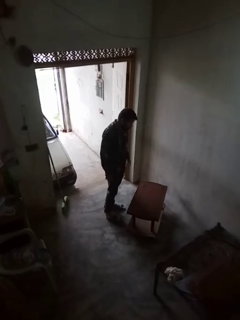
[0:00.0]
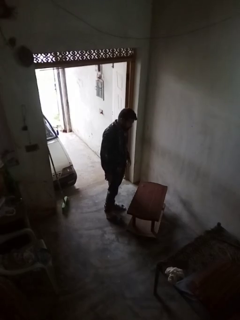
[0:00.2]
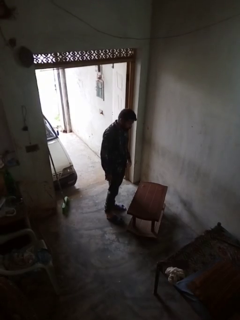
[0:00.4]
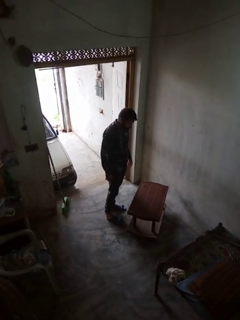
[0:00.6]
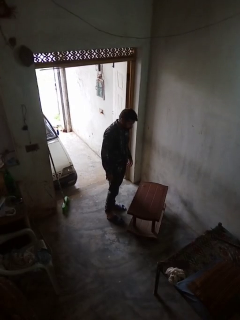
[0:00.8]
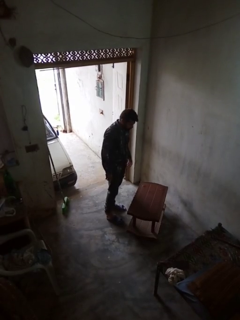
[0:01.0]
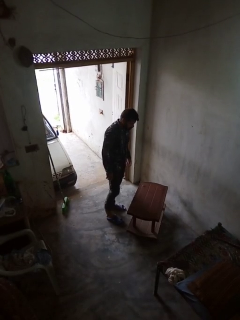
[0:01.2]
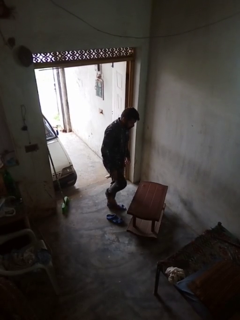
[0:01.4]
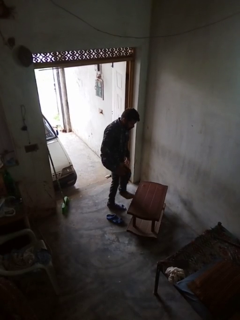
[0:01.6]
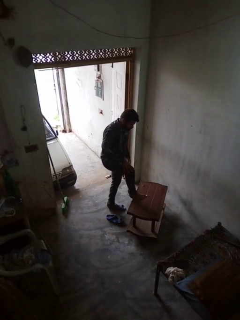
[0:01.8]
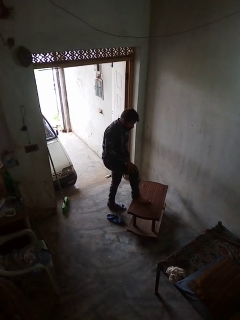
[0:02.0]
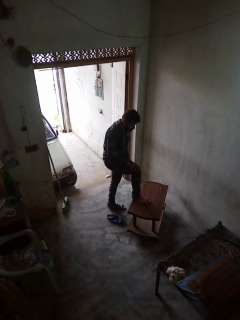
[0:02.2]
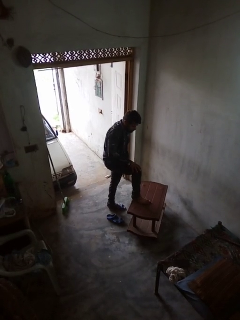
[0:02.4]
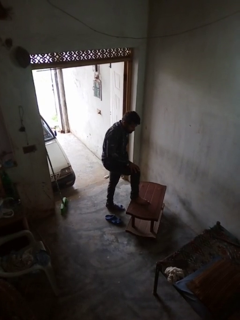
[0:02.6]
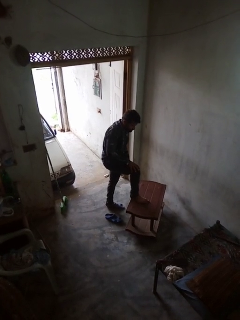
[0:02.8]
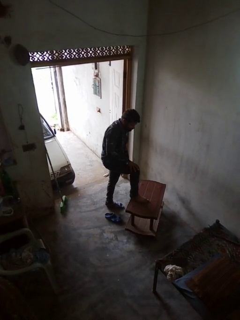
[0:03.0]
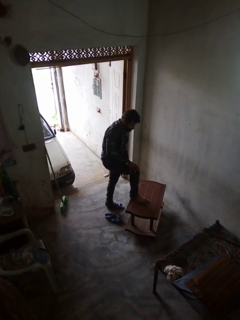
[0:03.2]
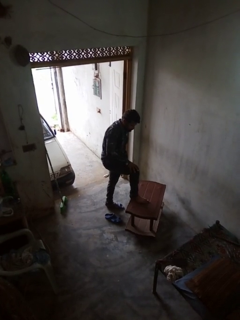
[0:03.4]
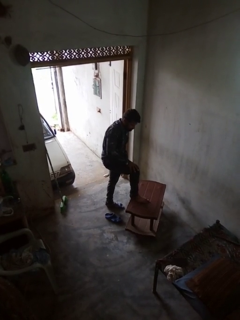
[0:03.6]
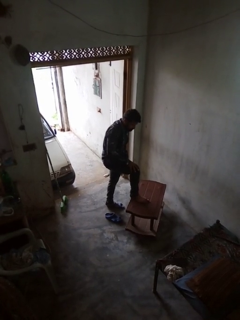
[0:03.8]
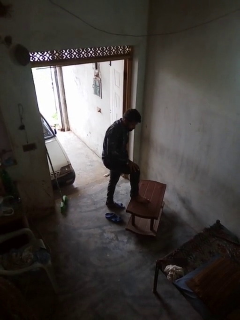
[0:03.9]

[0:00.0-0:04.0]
person puts feet up

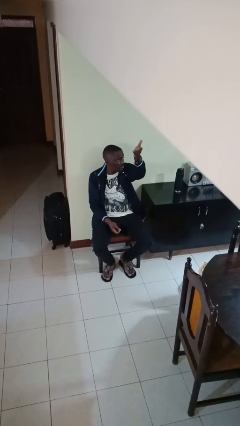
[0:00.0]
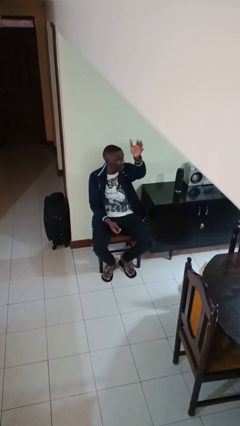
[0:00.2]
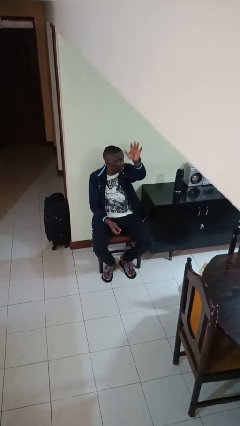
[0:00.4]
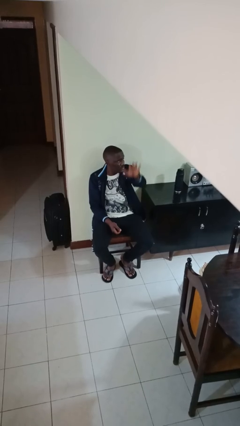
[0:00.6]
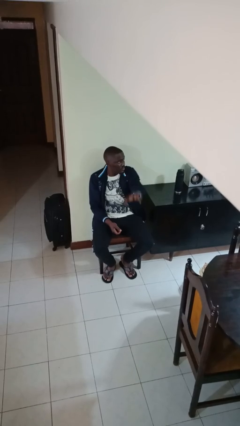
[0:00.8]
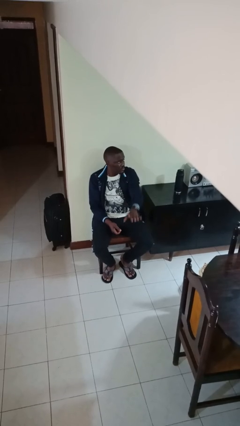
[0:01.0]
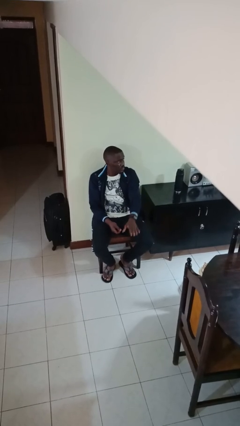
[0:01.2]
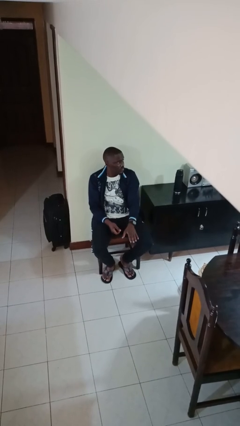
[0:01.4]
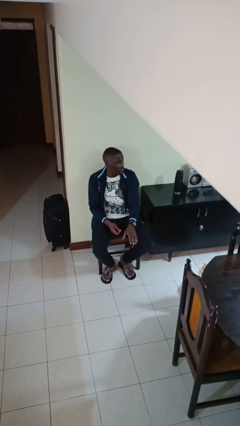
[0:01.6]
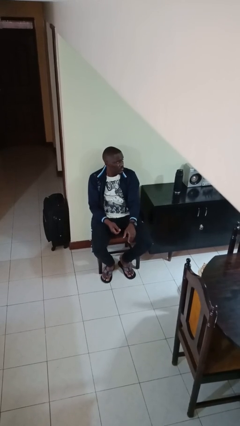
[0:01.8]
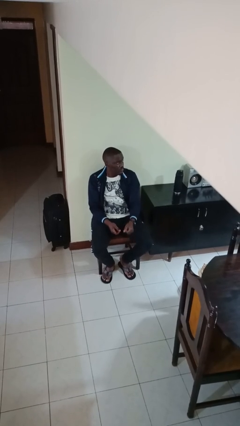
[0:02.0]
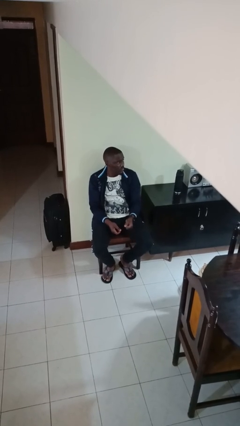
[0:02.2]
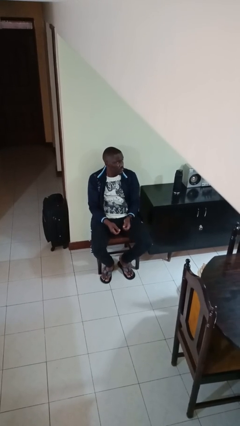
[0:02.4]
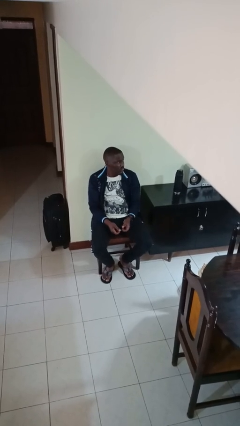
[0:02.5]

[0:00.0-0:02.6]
person gestures swipe down

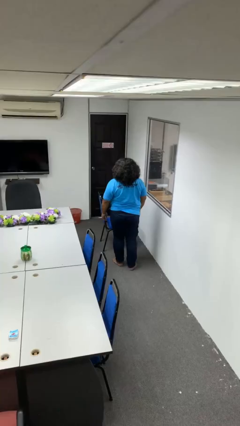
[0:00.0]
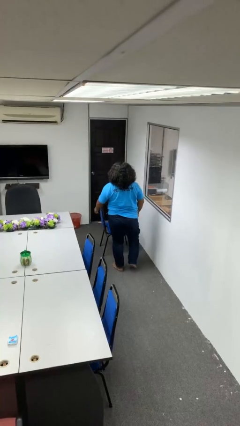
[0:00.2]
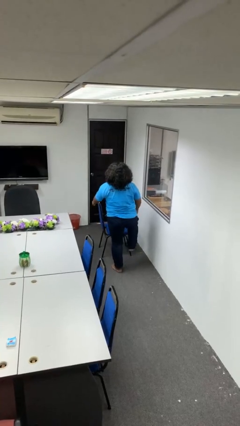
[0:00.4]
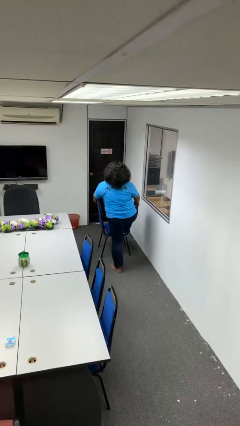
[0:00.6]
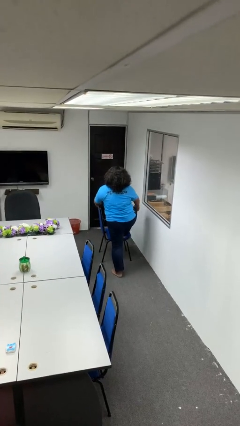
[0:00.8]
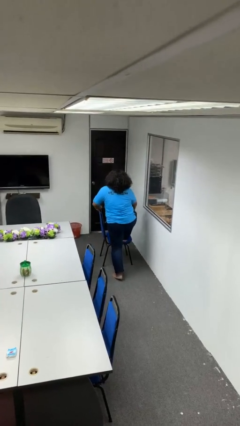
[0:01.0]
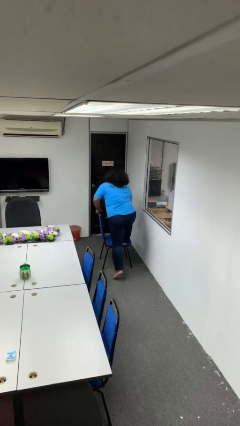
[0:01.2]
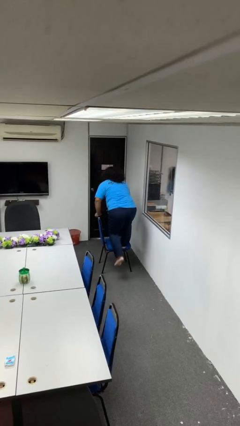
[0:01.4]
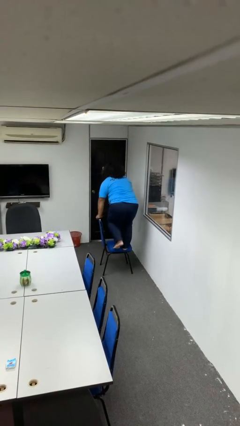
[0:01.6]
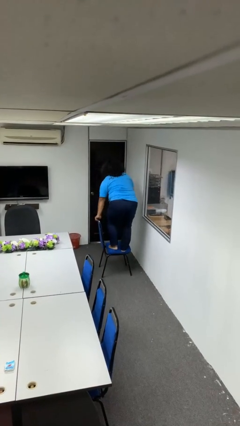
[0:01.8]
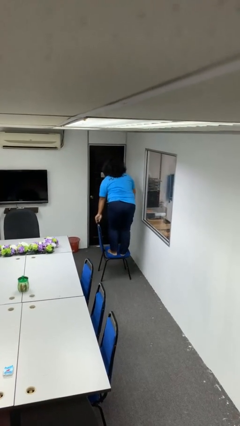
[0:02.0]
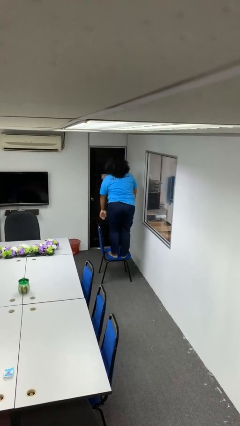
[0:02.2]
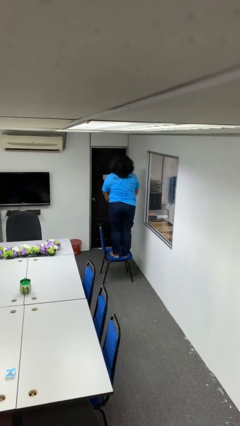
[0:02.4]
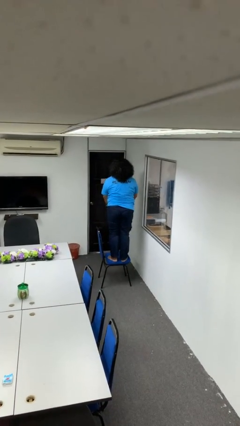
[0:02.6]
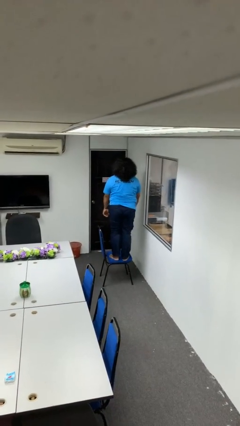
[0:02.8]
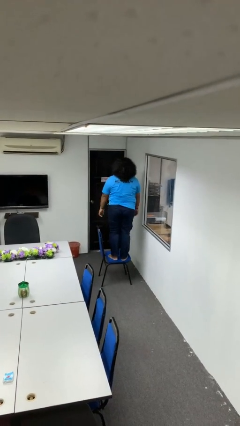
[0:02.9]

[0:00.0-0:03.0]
person climbs on chair

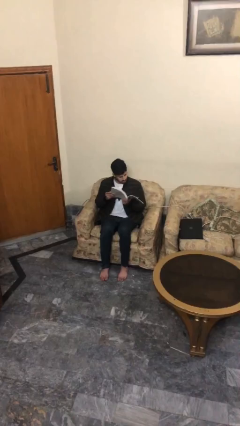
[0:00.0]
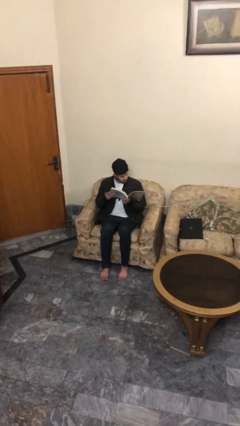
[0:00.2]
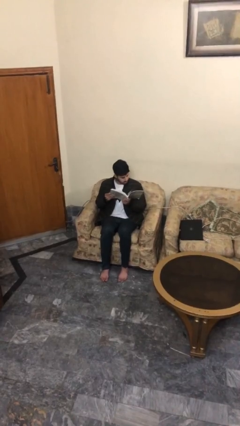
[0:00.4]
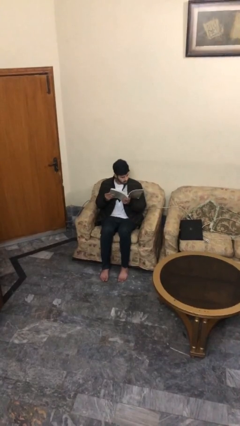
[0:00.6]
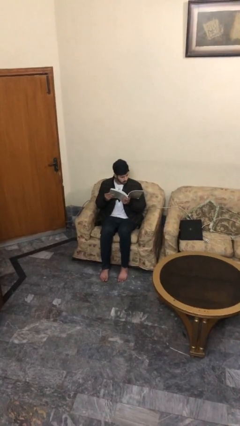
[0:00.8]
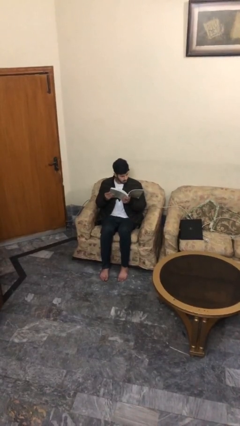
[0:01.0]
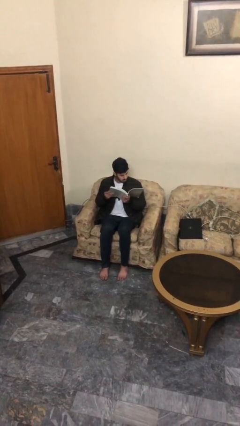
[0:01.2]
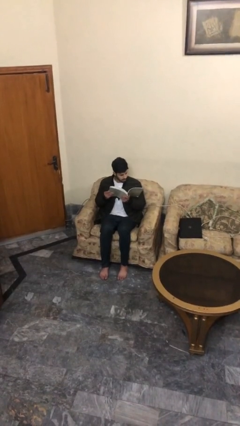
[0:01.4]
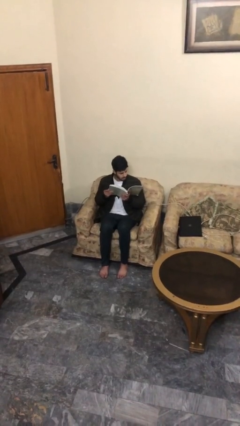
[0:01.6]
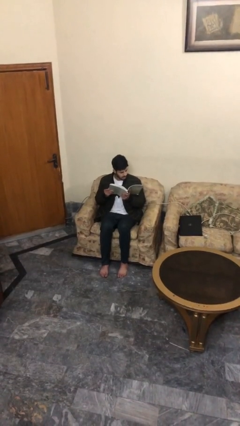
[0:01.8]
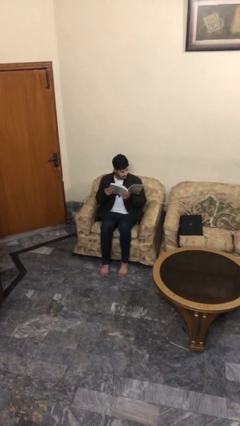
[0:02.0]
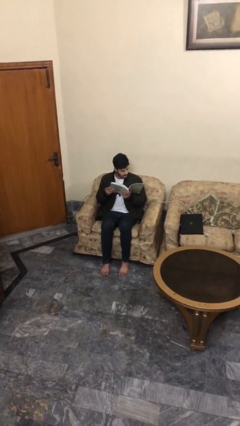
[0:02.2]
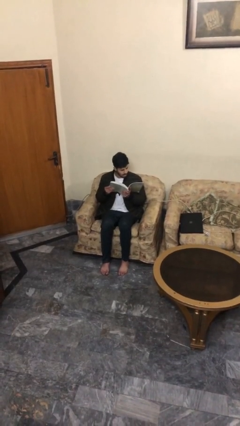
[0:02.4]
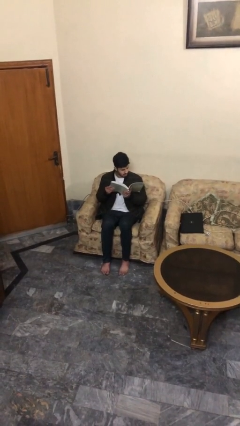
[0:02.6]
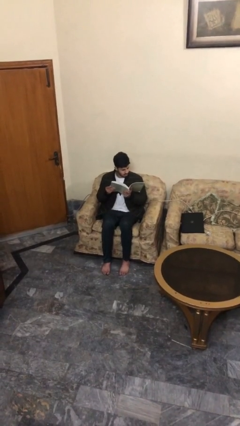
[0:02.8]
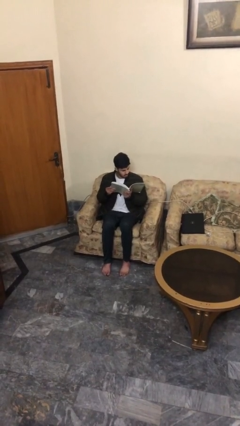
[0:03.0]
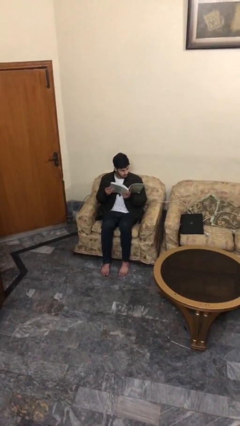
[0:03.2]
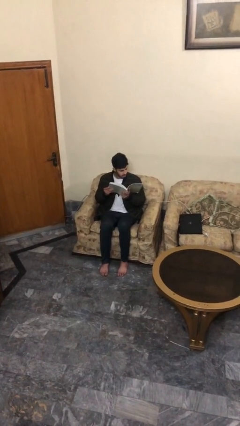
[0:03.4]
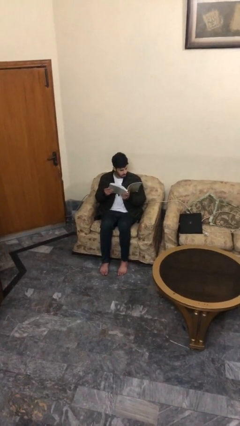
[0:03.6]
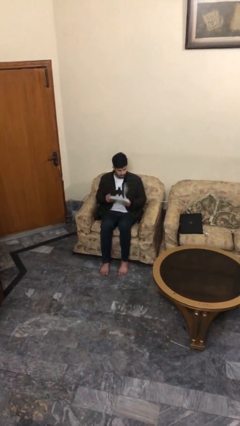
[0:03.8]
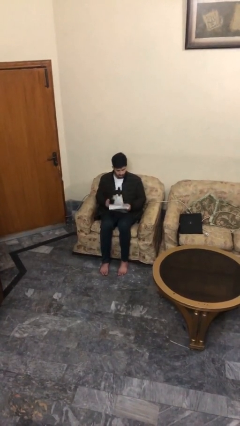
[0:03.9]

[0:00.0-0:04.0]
person reads document

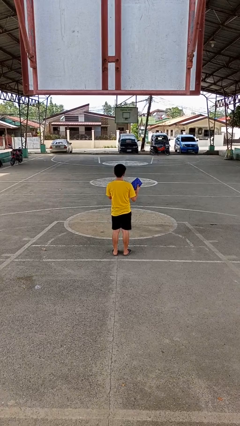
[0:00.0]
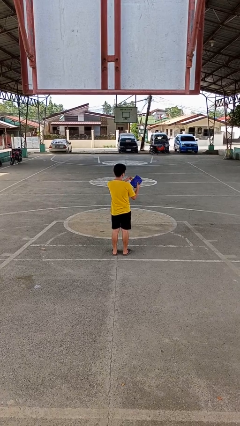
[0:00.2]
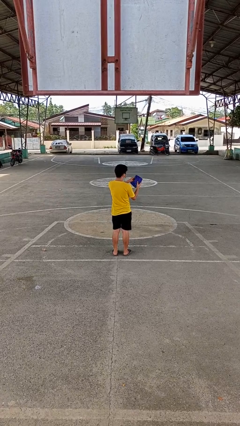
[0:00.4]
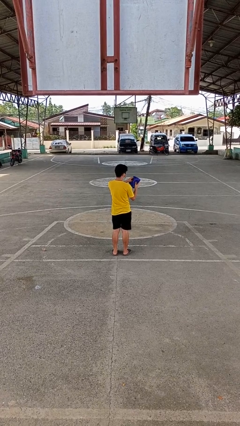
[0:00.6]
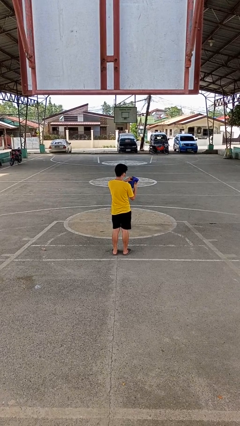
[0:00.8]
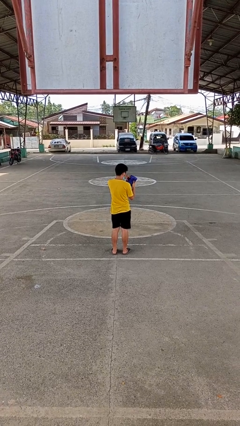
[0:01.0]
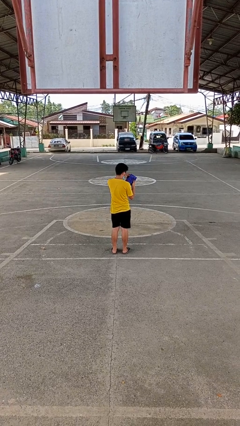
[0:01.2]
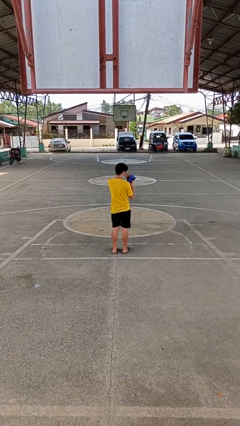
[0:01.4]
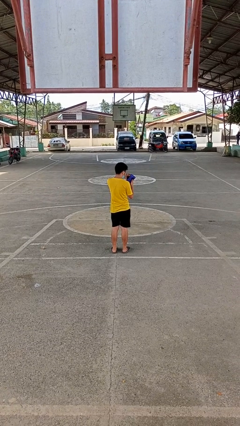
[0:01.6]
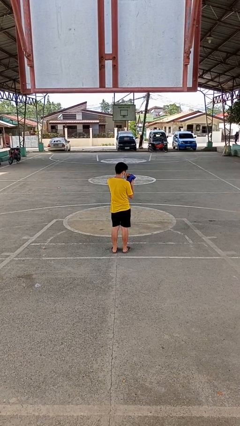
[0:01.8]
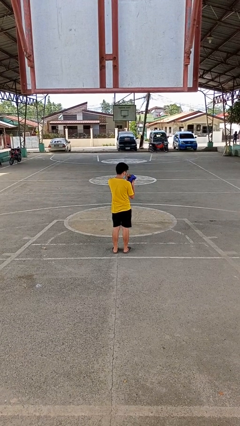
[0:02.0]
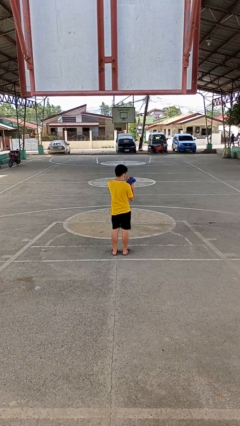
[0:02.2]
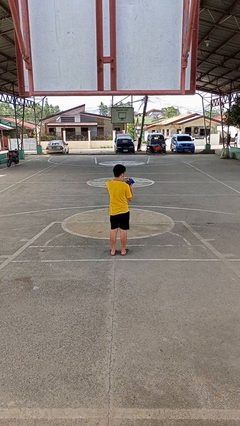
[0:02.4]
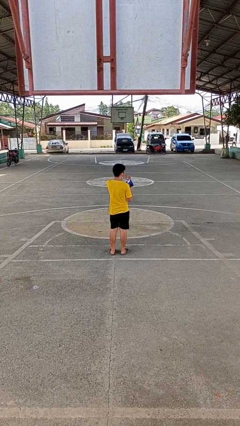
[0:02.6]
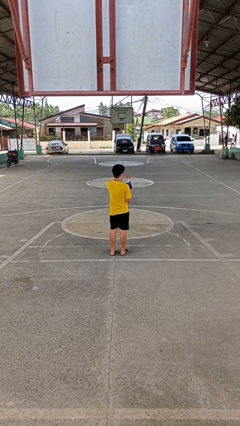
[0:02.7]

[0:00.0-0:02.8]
person searches in purse

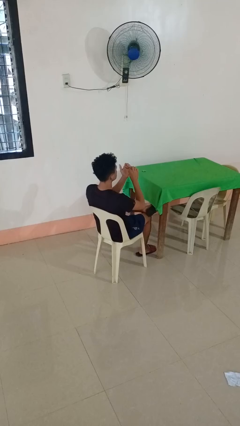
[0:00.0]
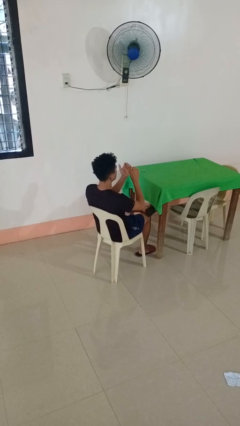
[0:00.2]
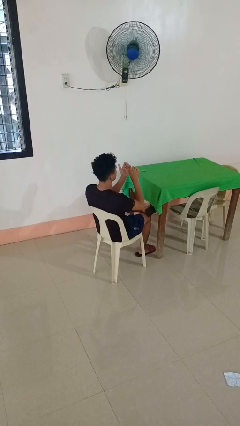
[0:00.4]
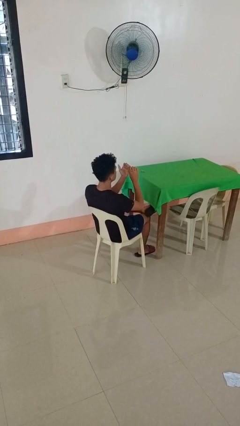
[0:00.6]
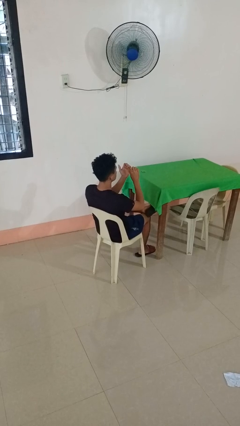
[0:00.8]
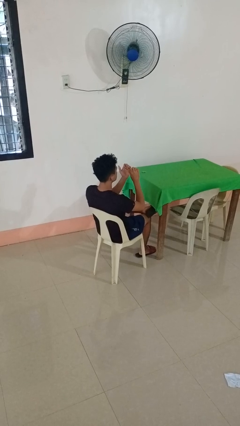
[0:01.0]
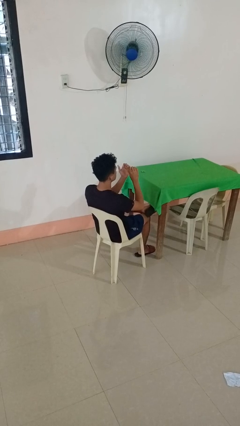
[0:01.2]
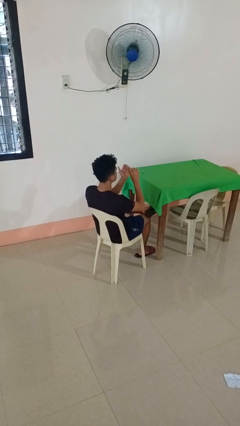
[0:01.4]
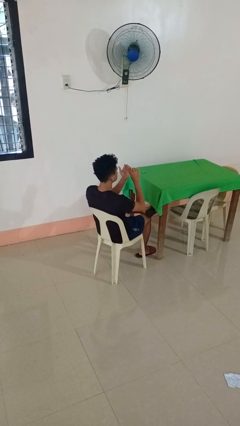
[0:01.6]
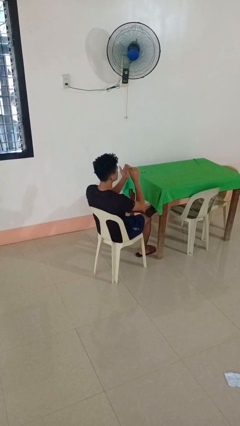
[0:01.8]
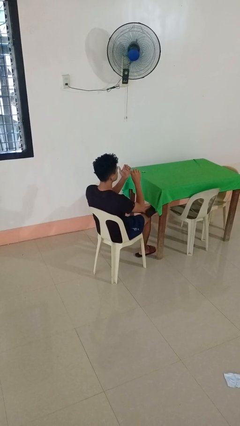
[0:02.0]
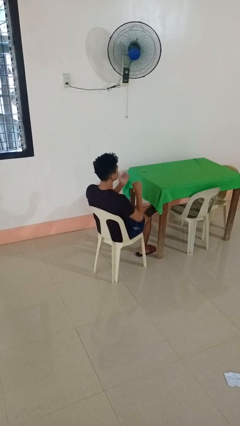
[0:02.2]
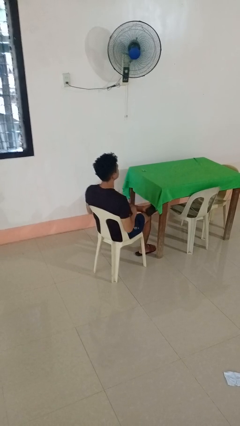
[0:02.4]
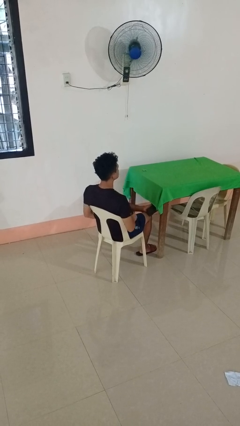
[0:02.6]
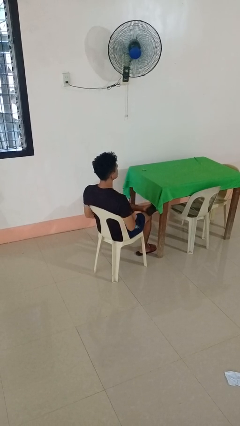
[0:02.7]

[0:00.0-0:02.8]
person files fingernails
